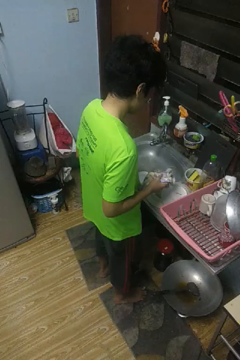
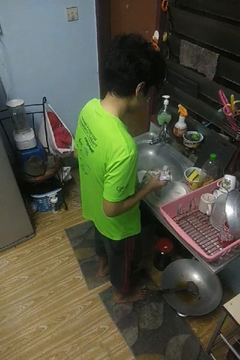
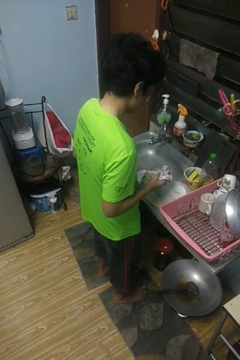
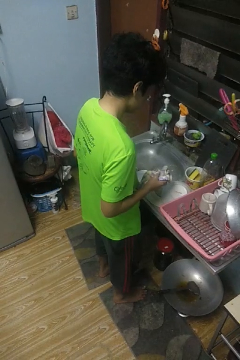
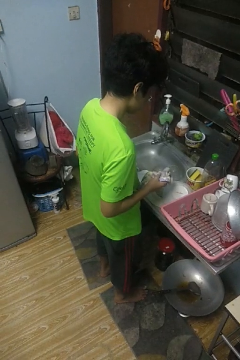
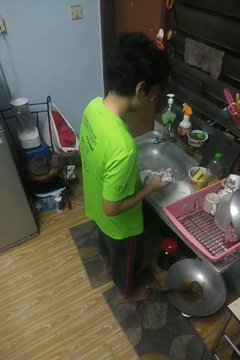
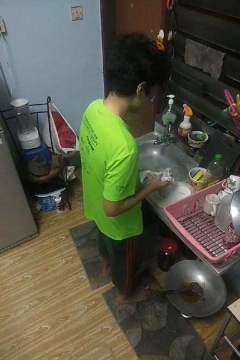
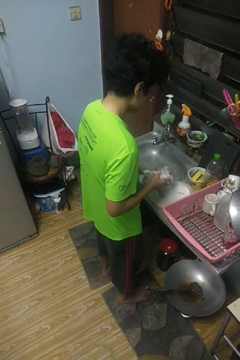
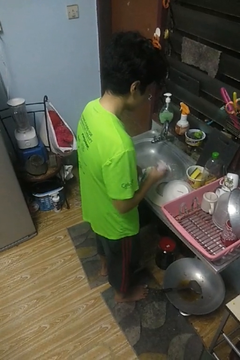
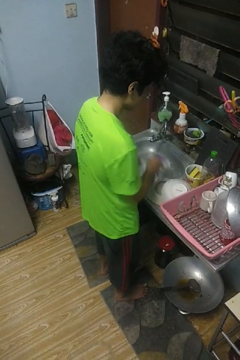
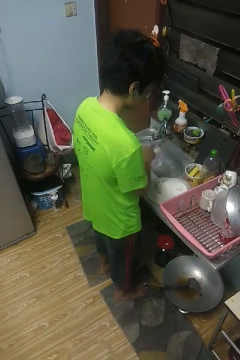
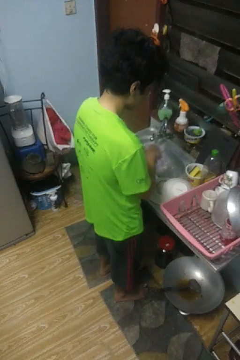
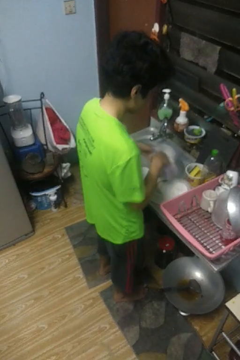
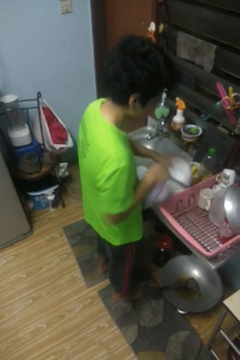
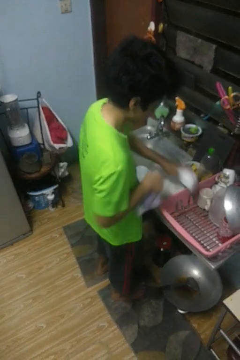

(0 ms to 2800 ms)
person dries dish

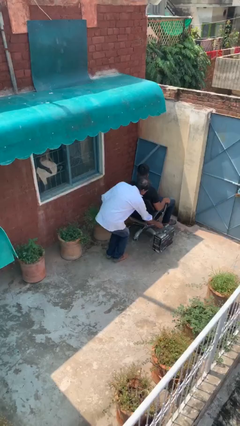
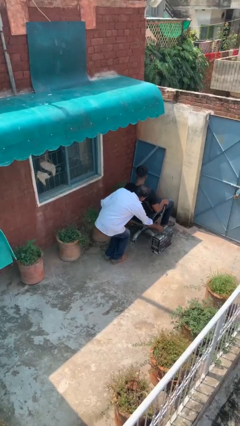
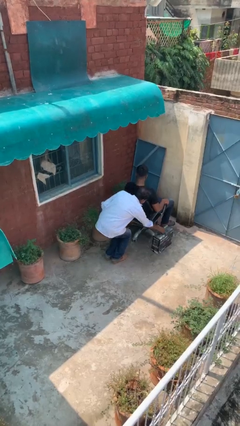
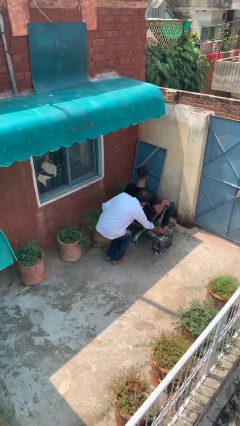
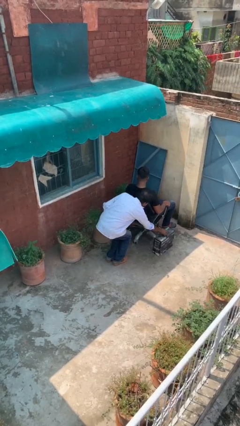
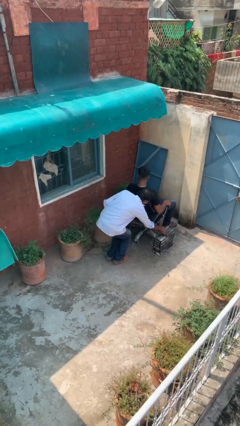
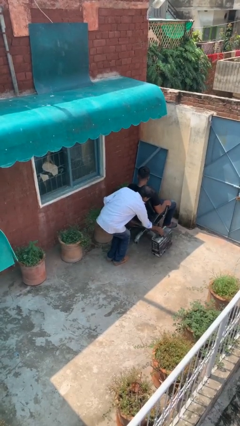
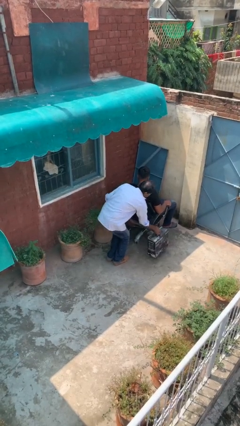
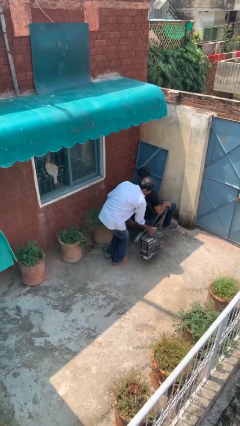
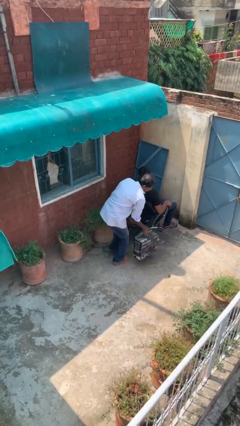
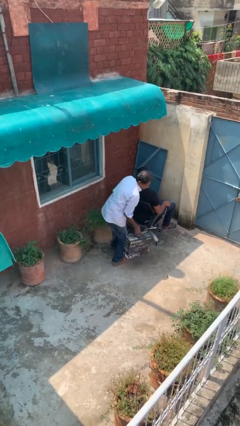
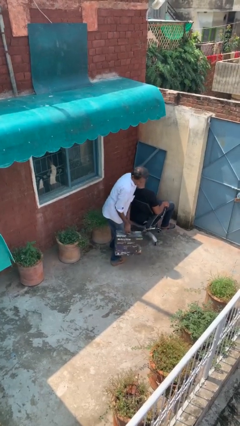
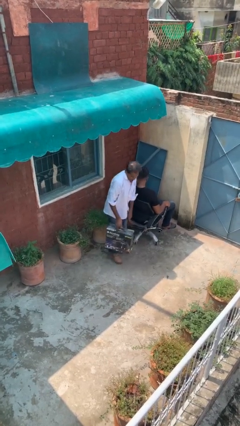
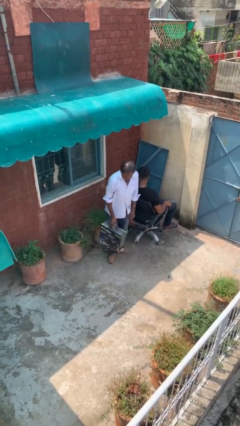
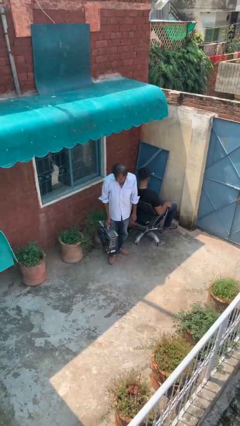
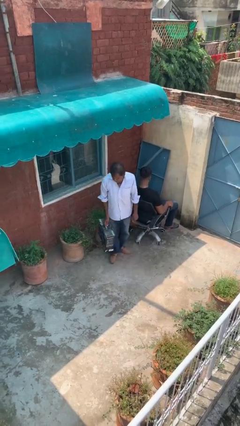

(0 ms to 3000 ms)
person steals object from person

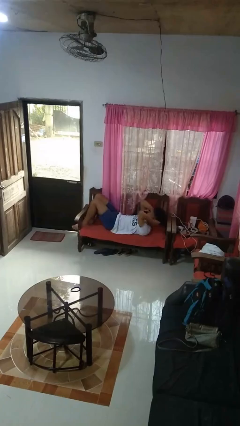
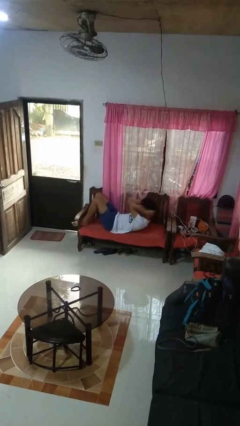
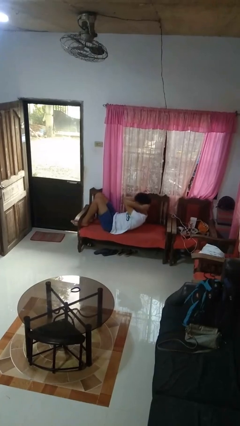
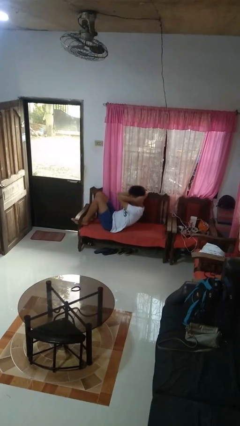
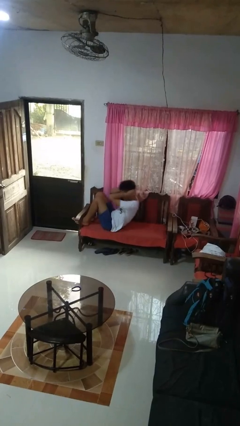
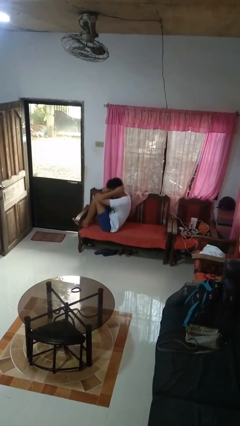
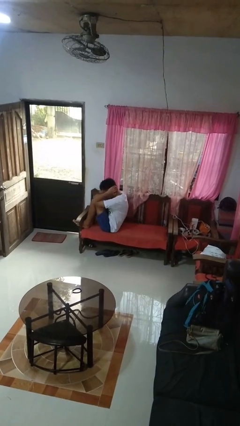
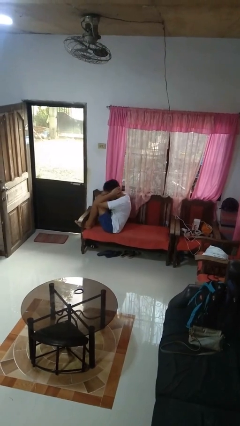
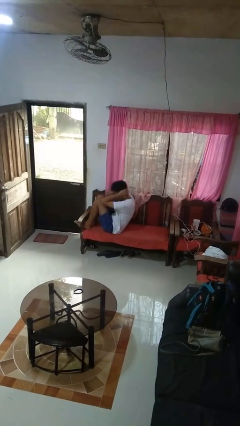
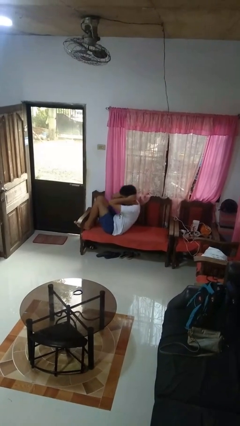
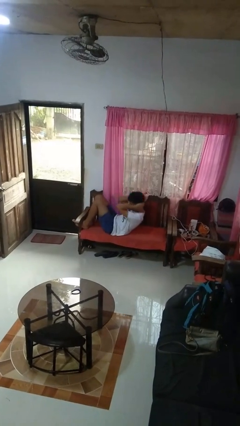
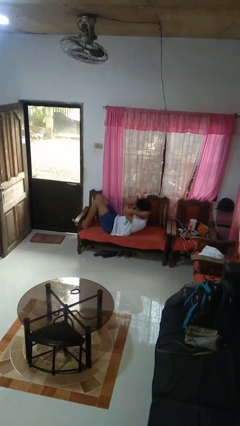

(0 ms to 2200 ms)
person exercises with situp

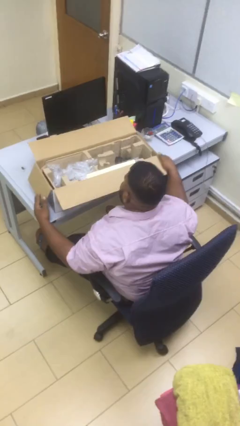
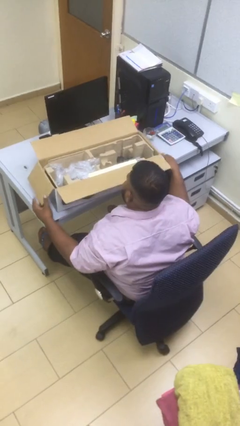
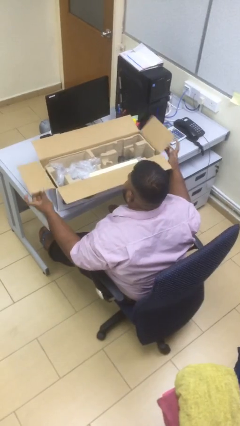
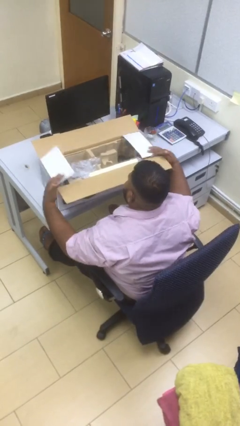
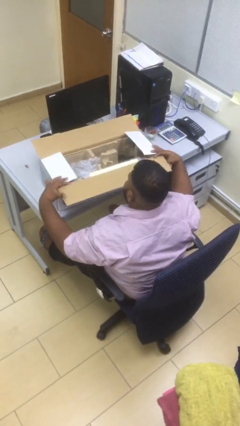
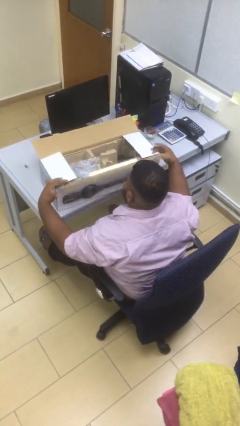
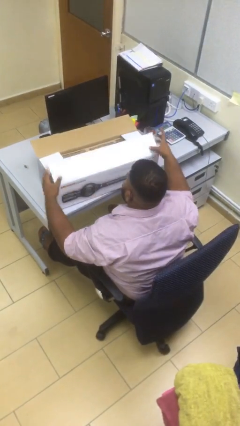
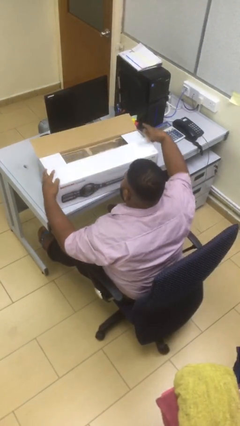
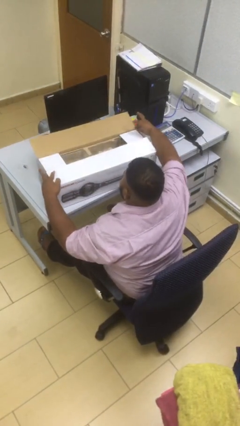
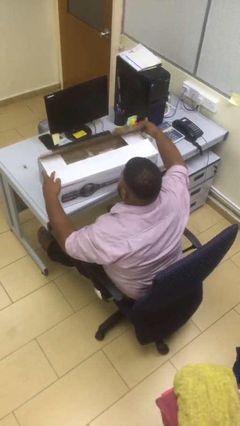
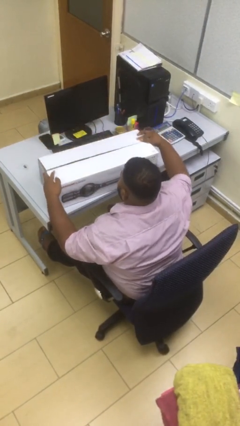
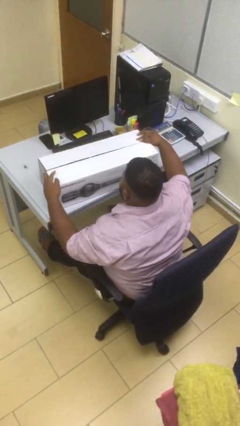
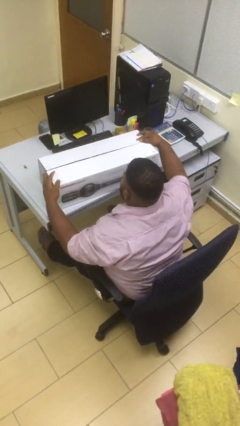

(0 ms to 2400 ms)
person closes box

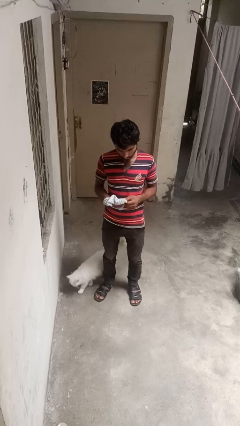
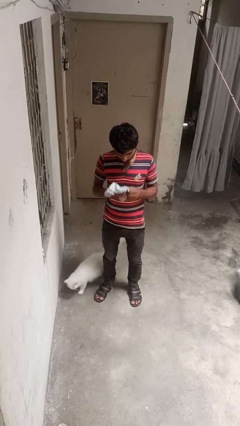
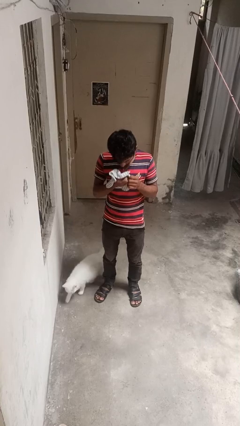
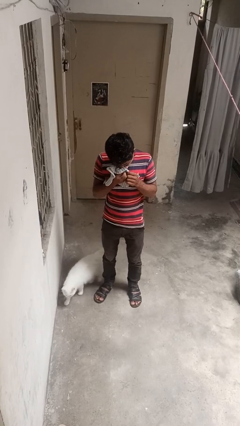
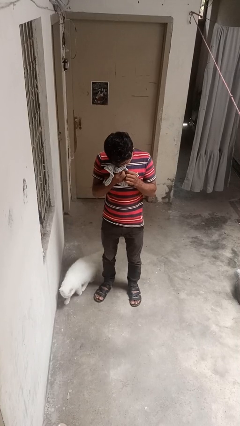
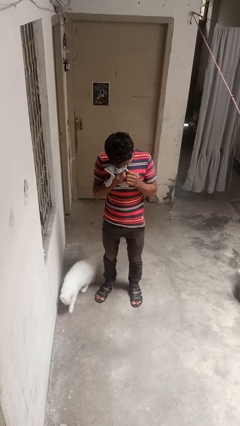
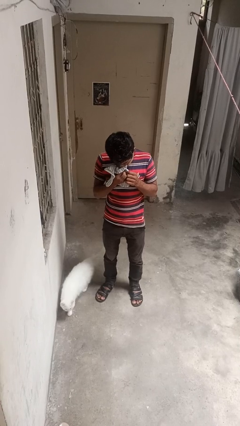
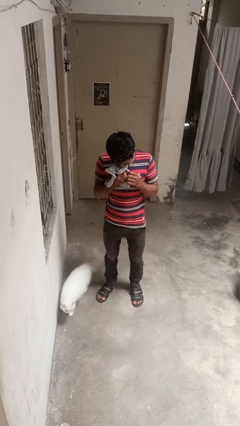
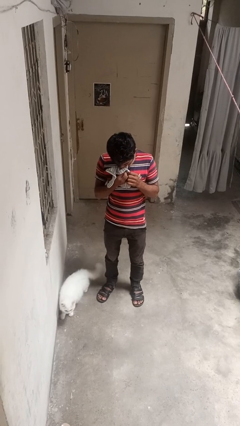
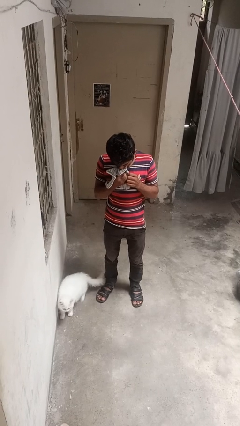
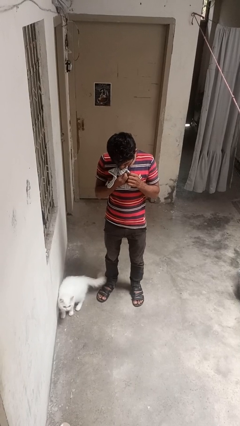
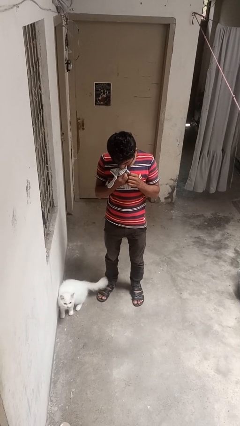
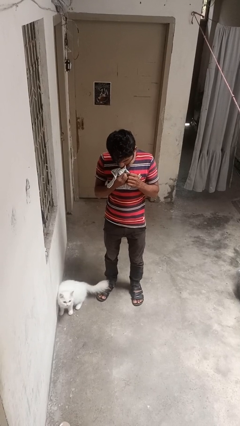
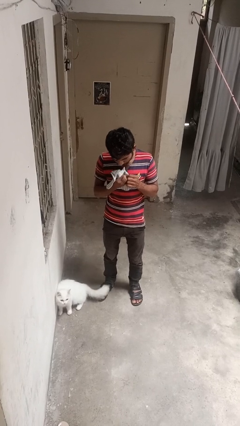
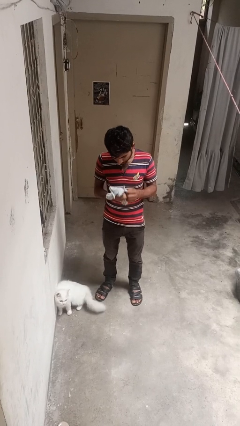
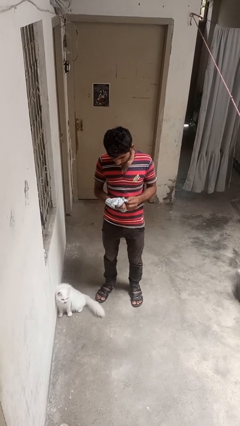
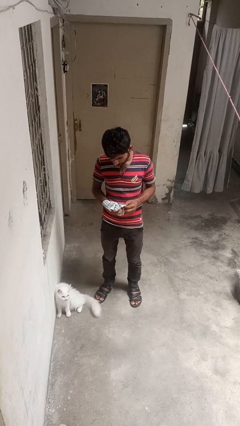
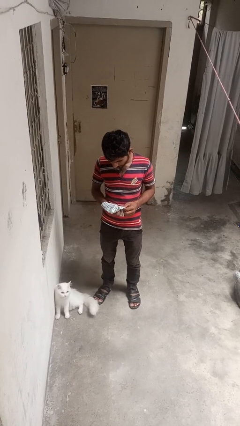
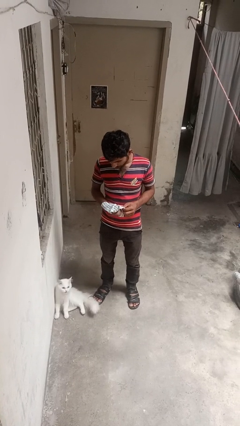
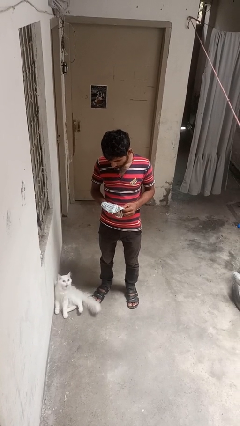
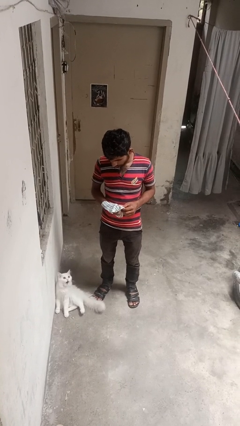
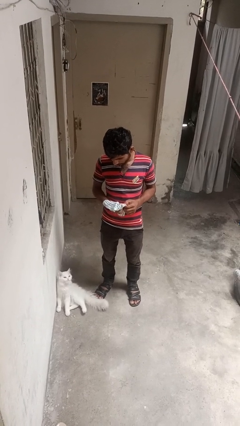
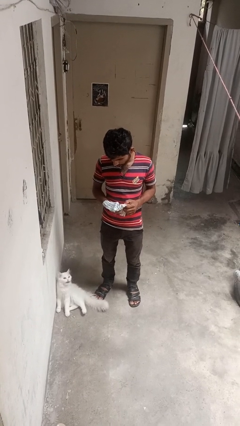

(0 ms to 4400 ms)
person blows nose

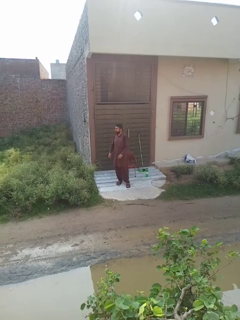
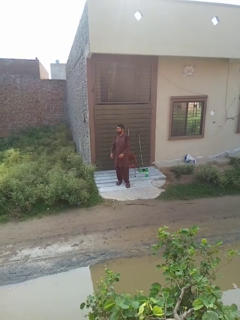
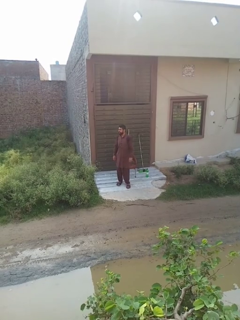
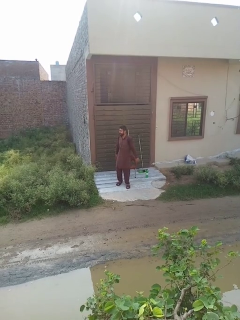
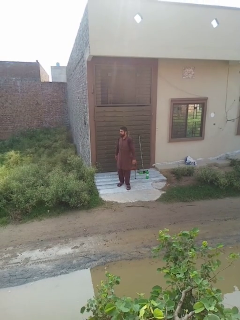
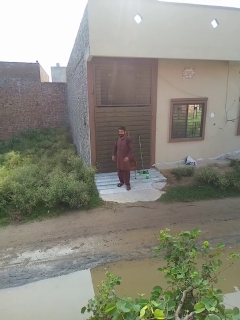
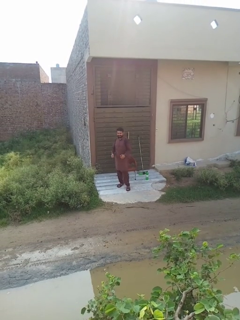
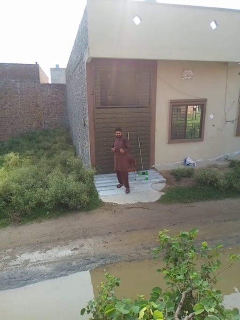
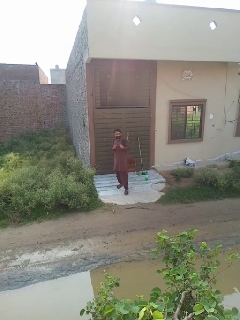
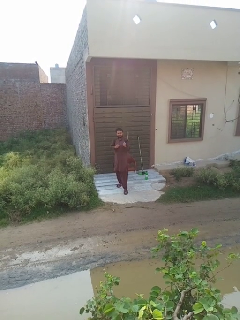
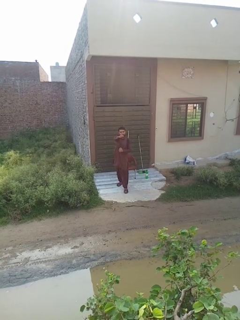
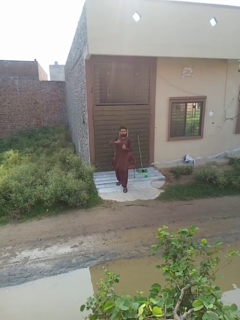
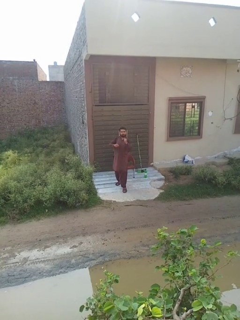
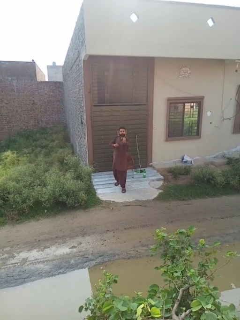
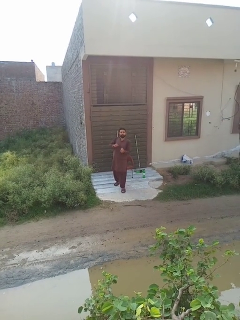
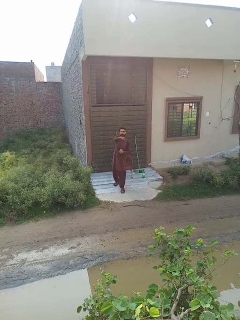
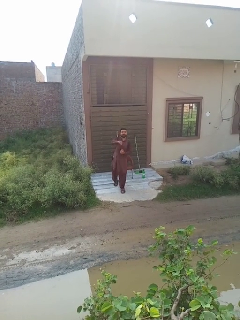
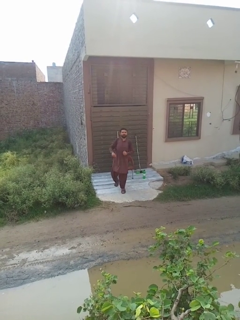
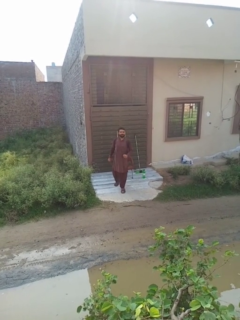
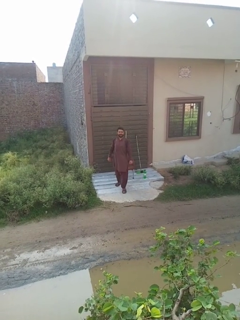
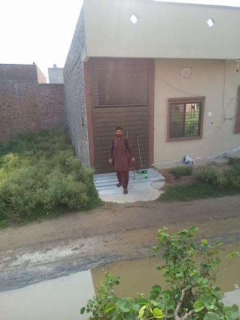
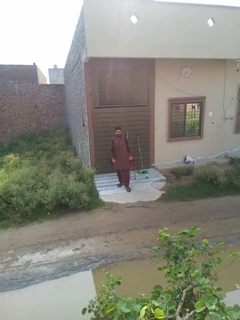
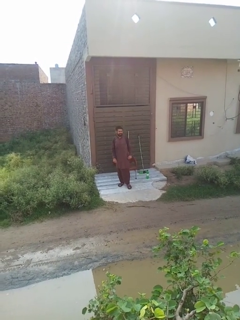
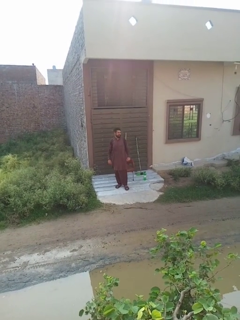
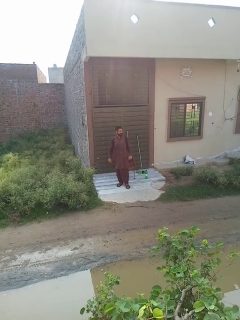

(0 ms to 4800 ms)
person punches
